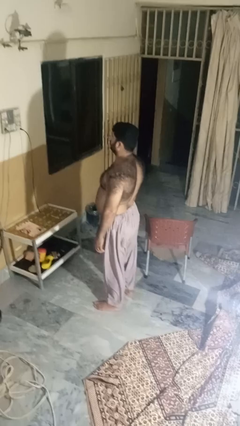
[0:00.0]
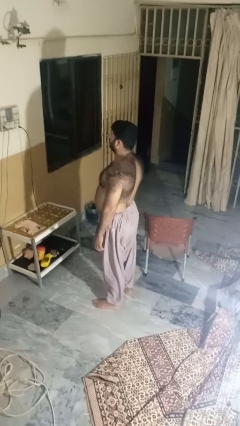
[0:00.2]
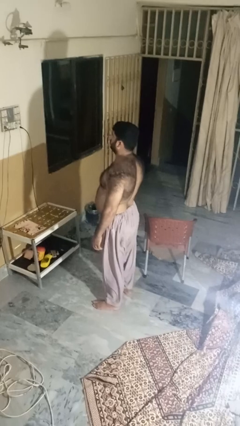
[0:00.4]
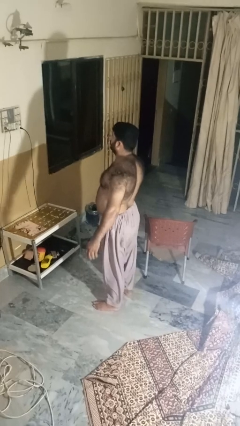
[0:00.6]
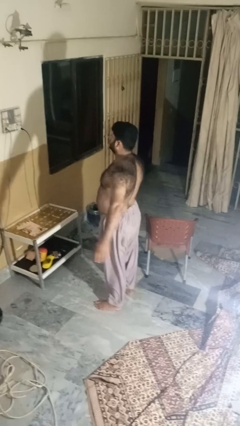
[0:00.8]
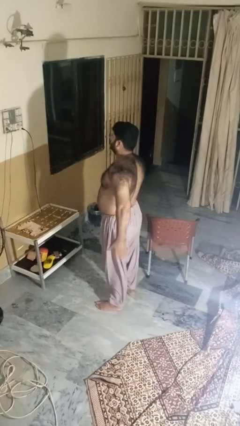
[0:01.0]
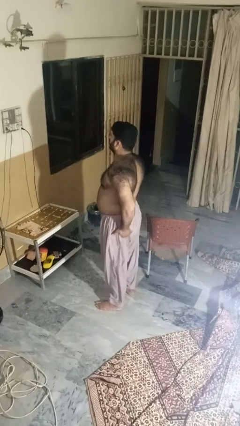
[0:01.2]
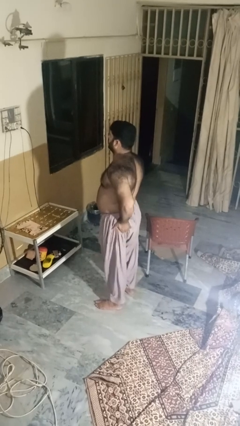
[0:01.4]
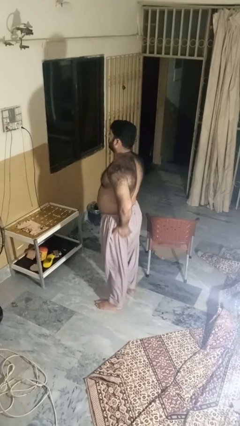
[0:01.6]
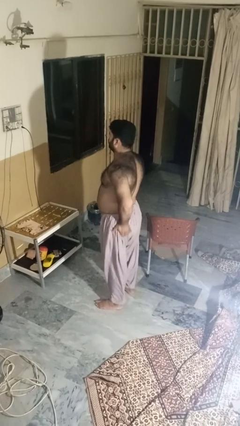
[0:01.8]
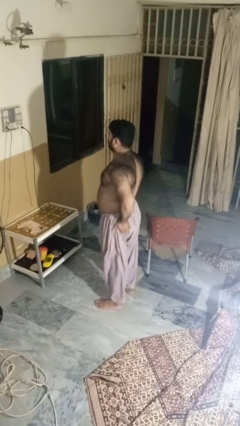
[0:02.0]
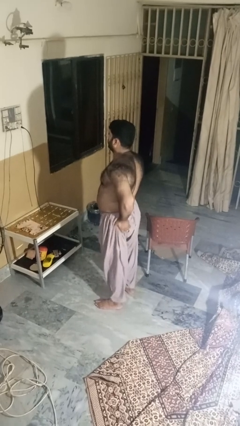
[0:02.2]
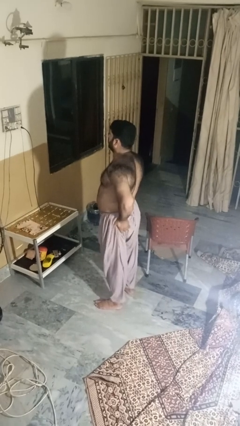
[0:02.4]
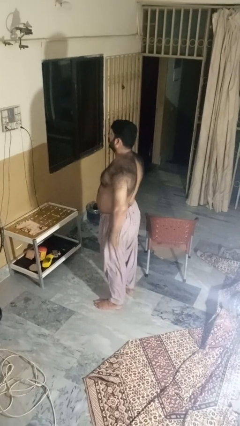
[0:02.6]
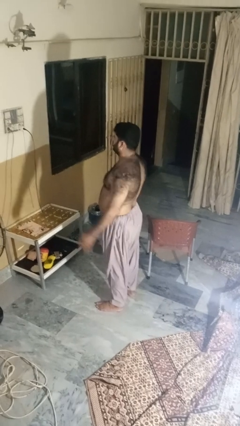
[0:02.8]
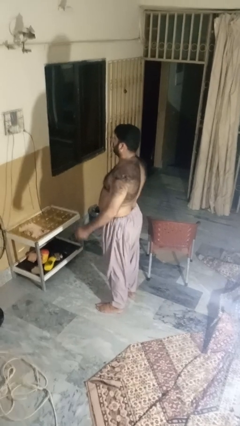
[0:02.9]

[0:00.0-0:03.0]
person wiggles hips

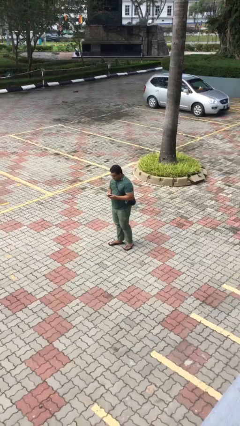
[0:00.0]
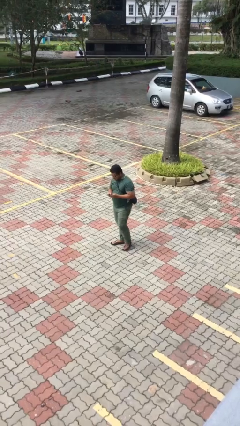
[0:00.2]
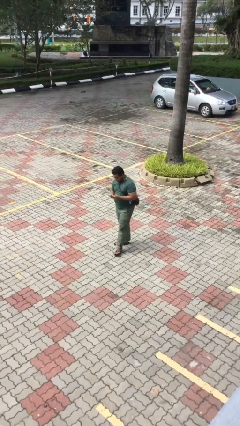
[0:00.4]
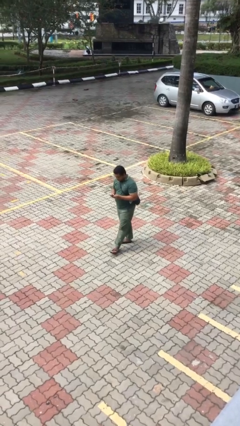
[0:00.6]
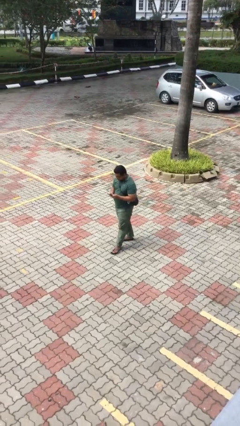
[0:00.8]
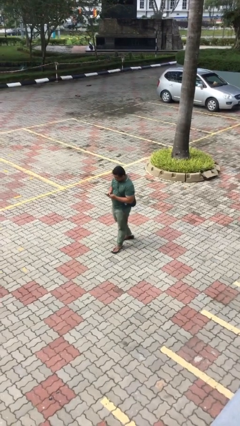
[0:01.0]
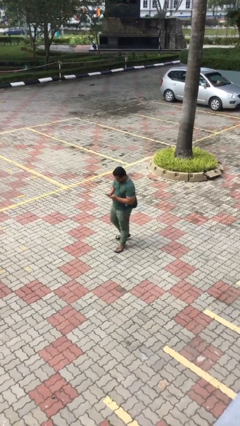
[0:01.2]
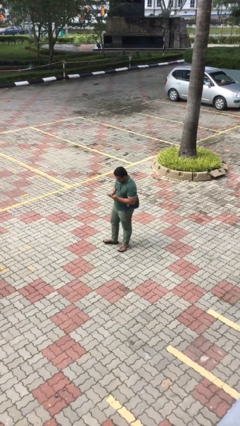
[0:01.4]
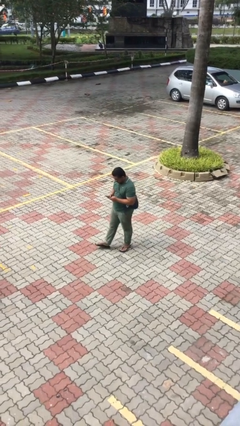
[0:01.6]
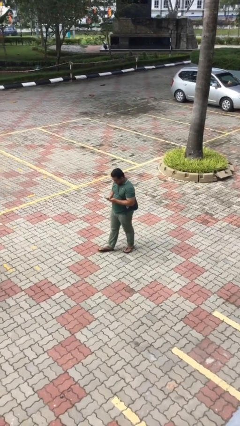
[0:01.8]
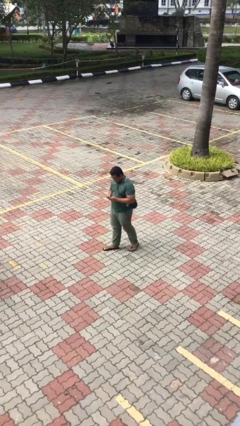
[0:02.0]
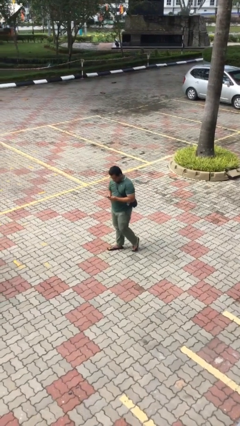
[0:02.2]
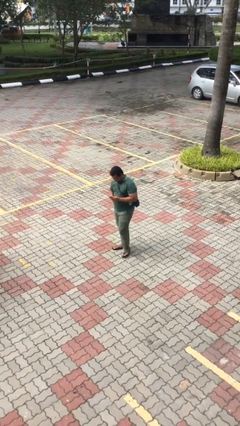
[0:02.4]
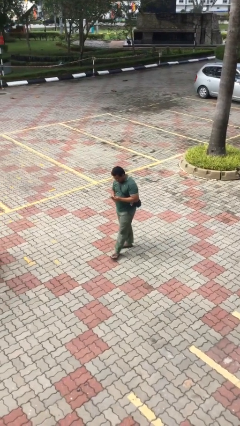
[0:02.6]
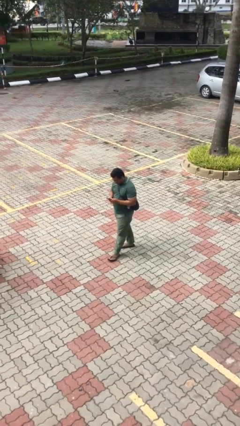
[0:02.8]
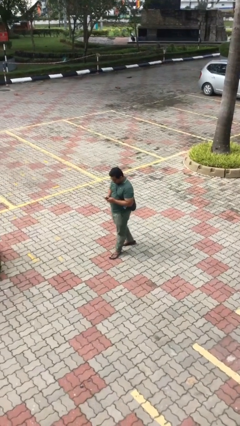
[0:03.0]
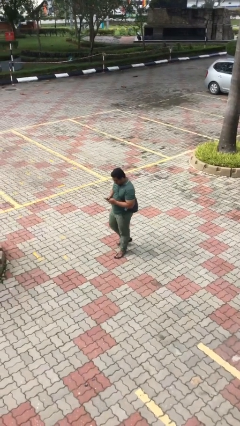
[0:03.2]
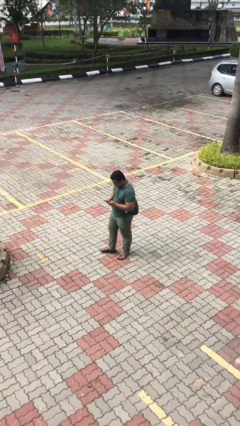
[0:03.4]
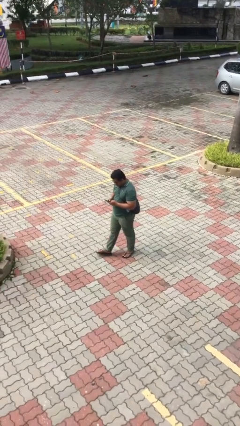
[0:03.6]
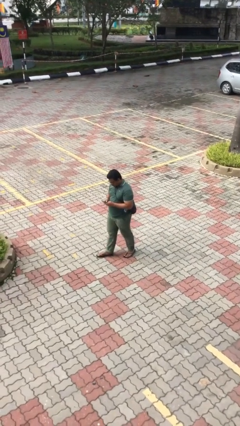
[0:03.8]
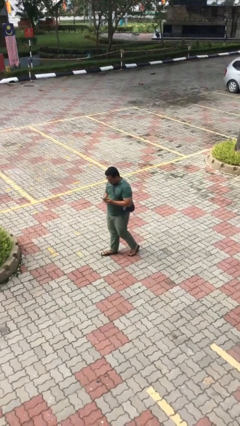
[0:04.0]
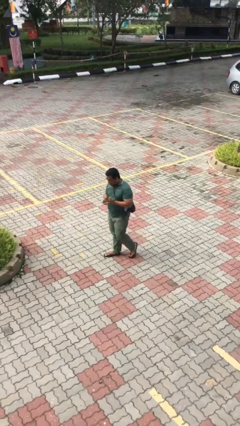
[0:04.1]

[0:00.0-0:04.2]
person texts on phone

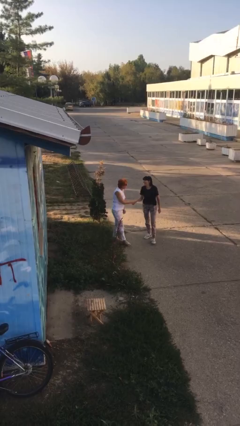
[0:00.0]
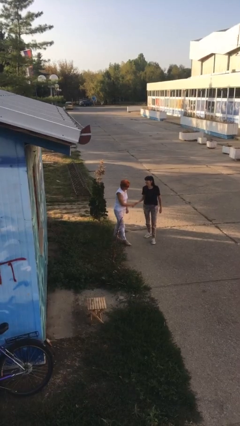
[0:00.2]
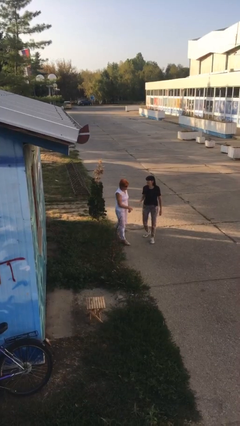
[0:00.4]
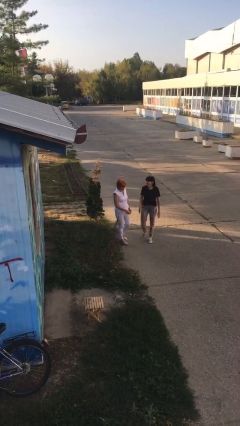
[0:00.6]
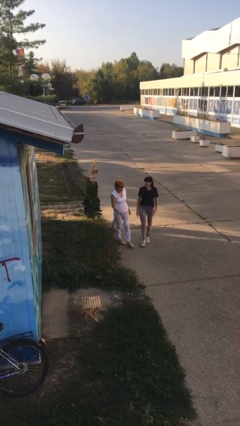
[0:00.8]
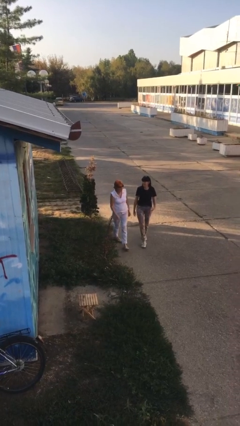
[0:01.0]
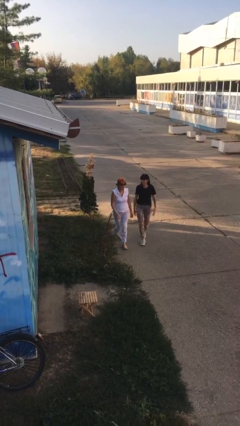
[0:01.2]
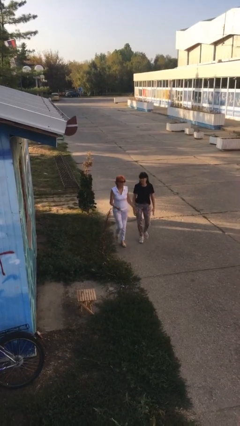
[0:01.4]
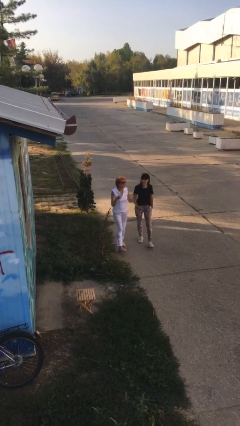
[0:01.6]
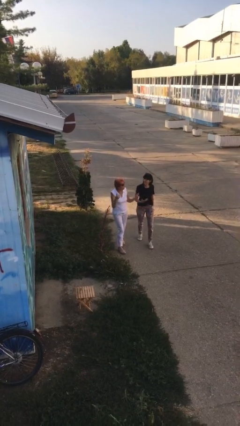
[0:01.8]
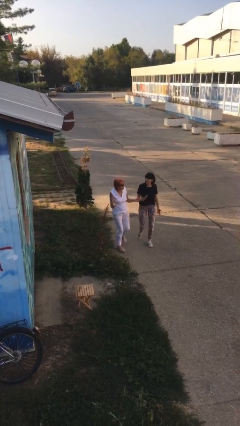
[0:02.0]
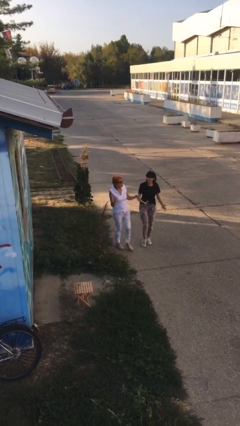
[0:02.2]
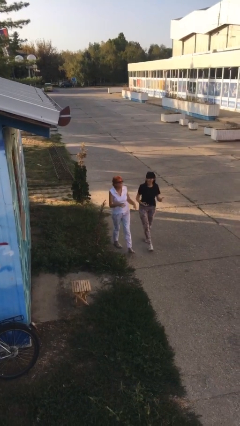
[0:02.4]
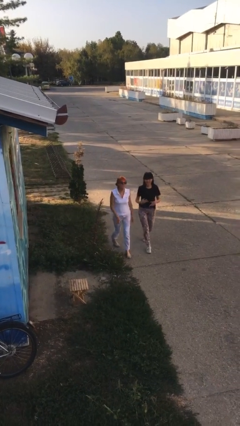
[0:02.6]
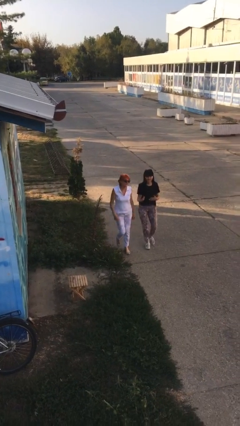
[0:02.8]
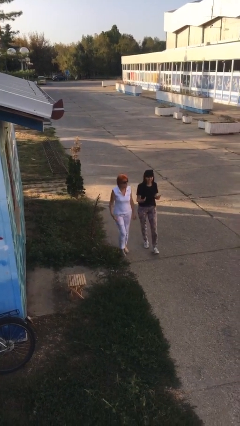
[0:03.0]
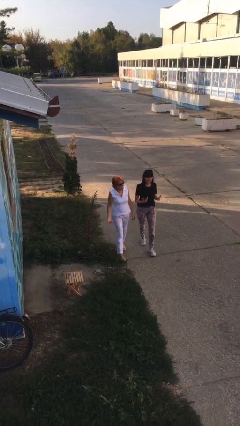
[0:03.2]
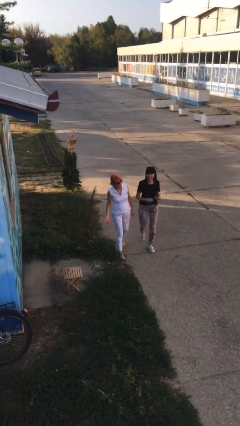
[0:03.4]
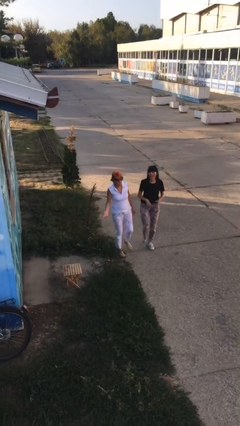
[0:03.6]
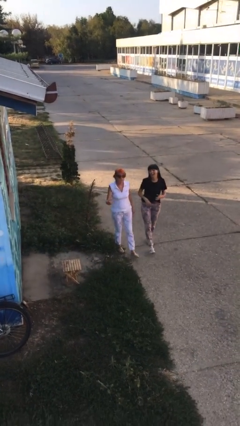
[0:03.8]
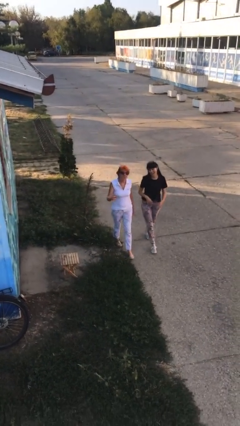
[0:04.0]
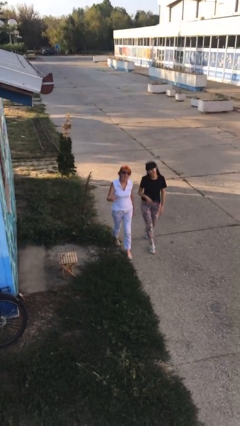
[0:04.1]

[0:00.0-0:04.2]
person talks to person

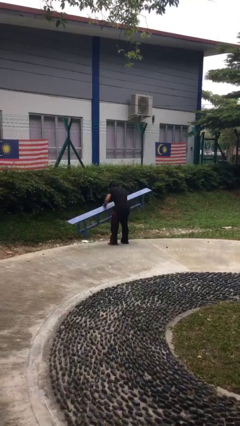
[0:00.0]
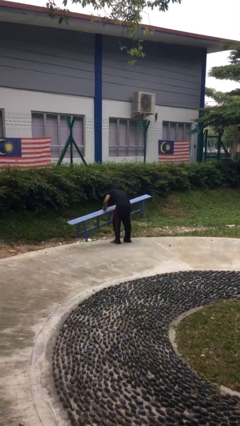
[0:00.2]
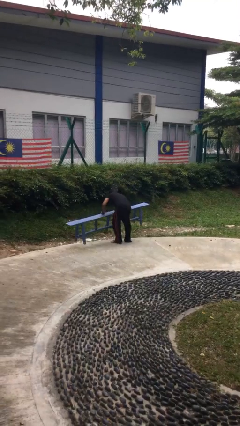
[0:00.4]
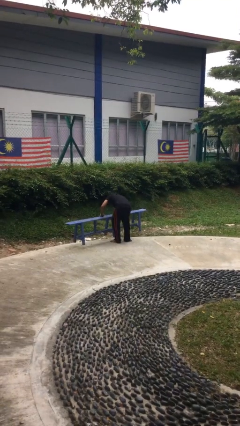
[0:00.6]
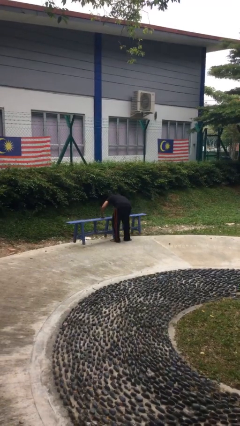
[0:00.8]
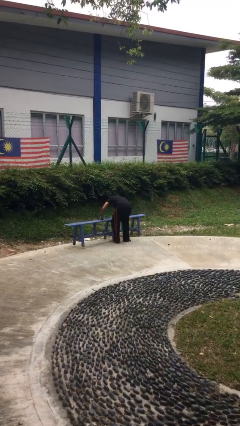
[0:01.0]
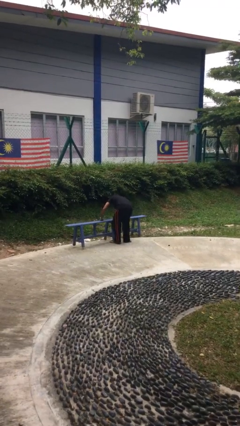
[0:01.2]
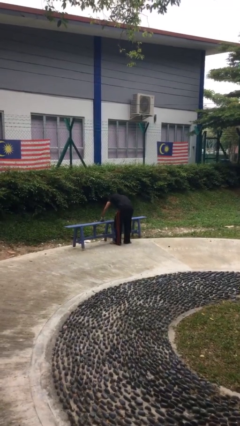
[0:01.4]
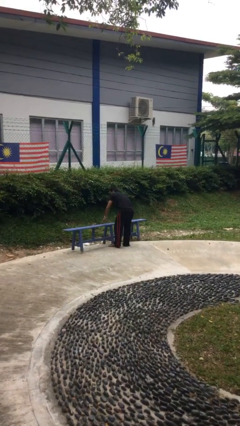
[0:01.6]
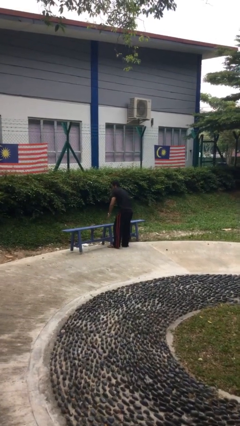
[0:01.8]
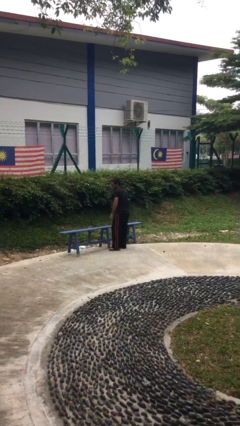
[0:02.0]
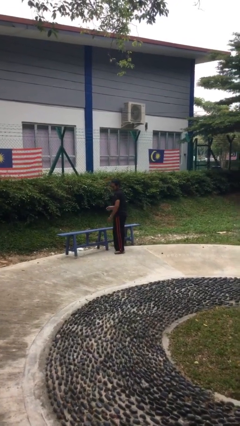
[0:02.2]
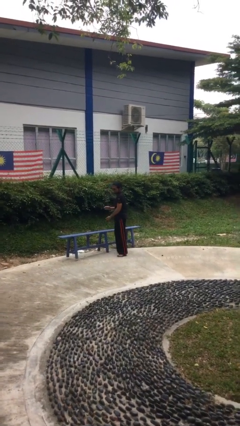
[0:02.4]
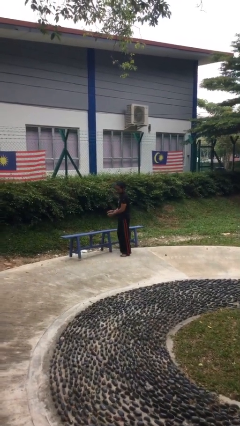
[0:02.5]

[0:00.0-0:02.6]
person puts down object on floor

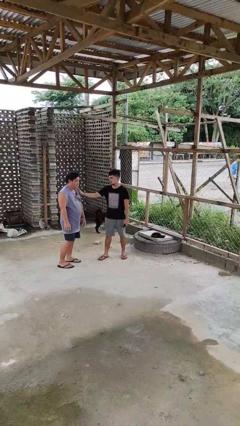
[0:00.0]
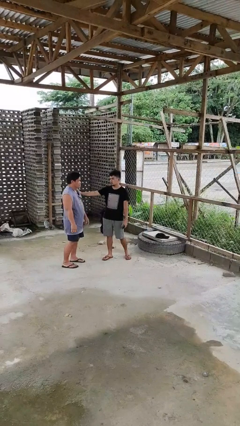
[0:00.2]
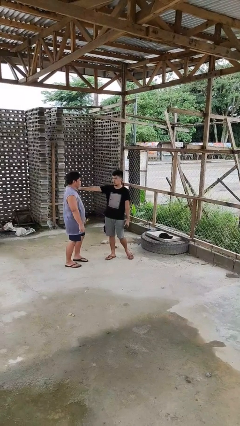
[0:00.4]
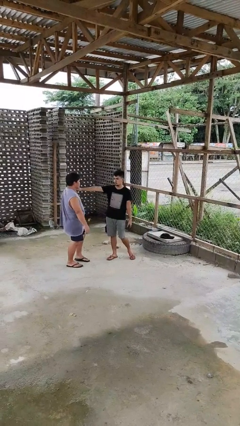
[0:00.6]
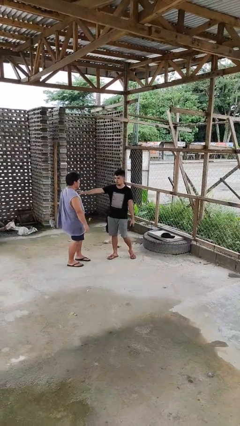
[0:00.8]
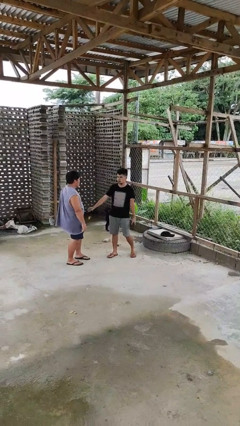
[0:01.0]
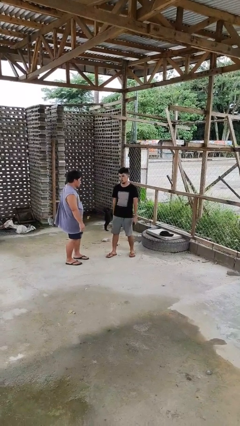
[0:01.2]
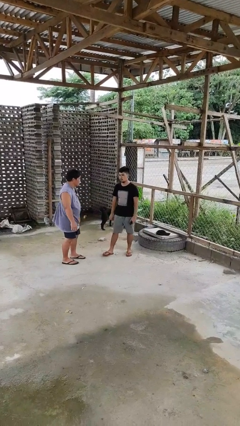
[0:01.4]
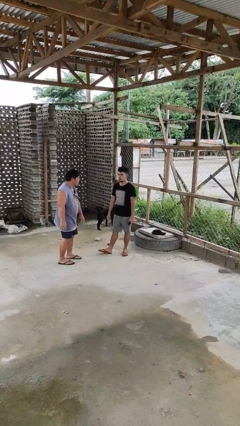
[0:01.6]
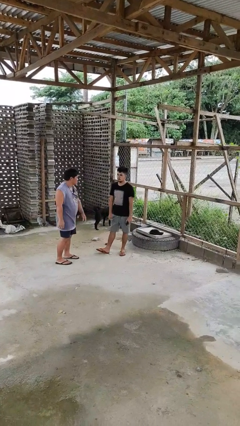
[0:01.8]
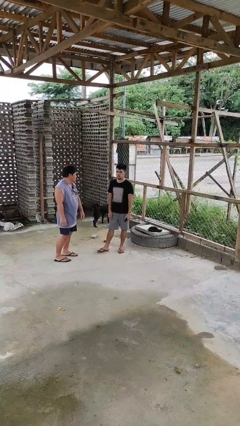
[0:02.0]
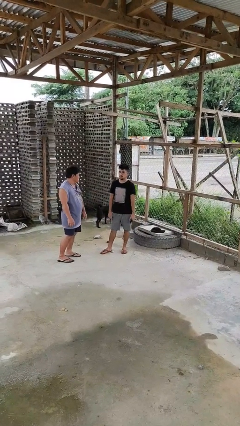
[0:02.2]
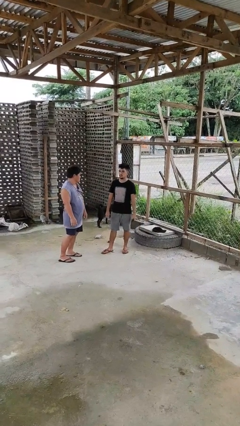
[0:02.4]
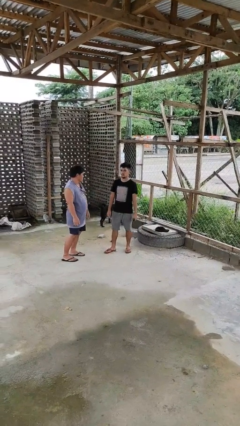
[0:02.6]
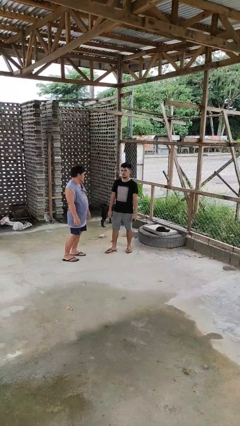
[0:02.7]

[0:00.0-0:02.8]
person shoves person

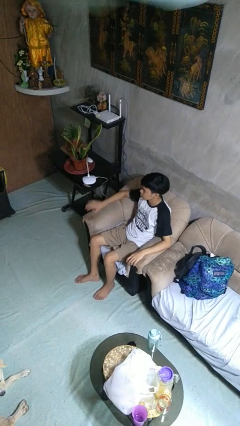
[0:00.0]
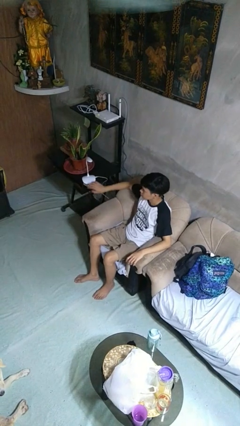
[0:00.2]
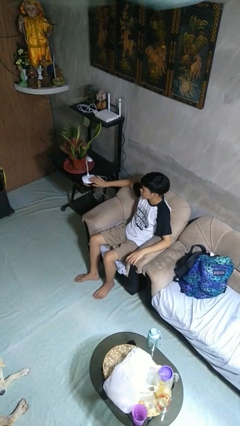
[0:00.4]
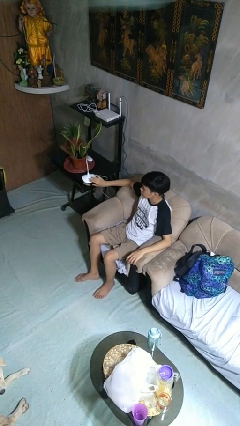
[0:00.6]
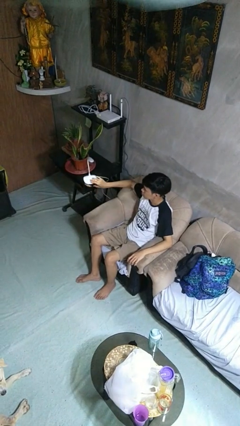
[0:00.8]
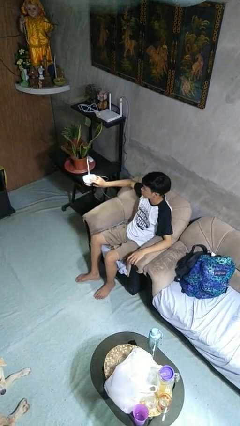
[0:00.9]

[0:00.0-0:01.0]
person turns on lamp
